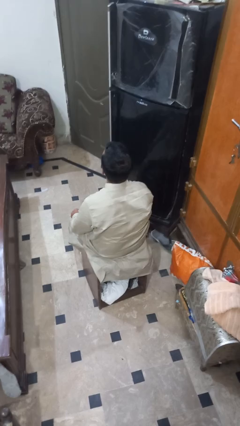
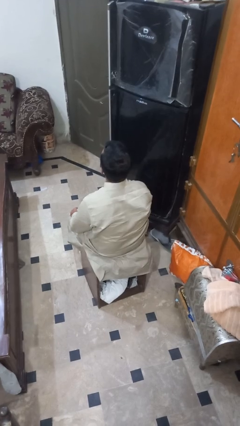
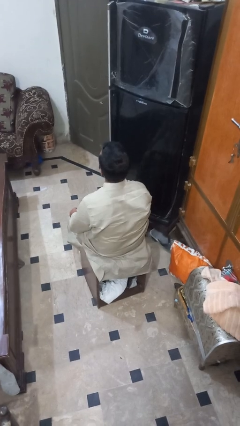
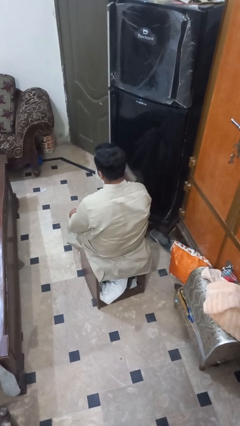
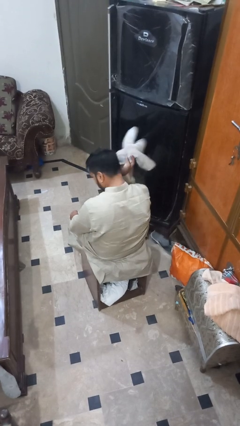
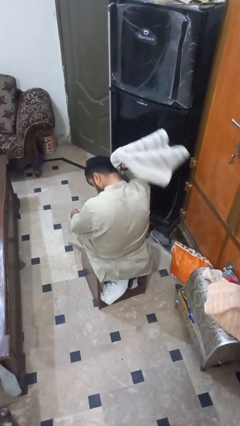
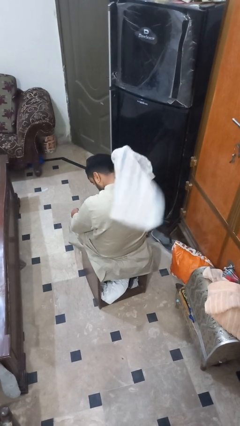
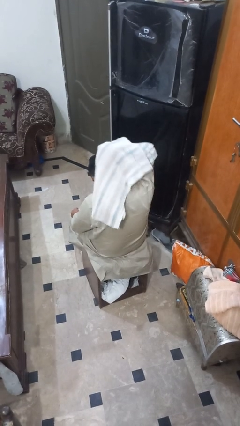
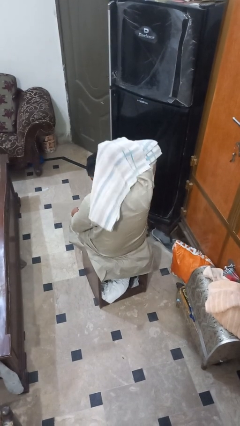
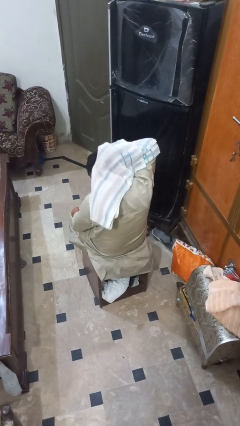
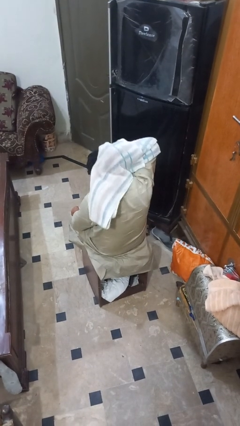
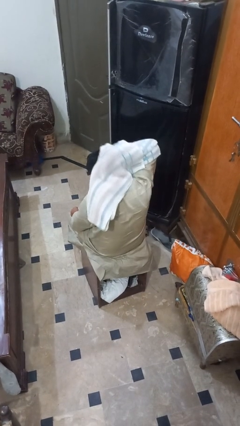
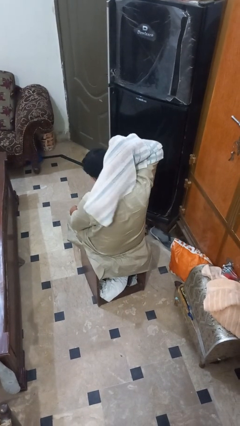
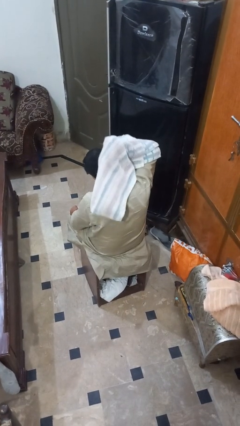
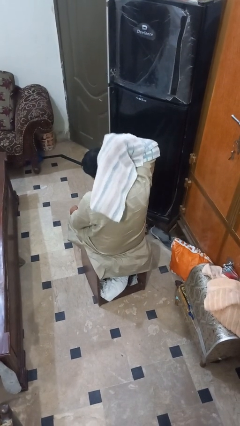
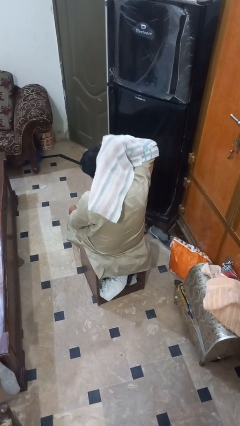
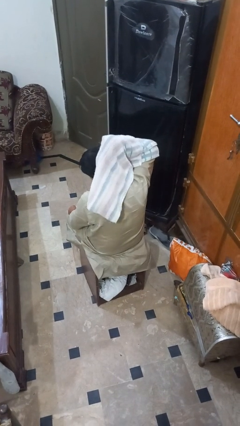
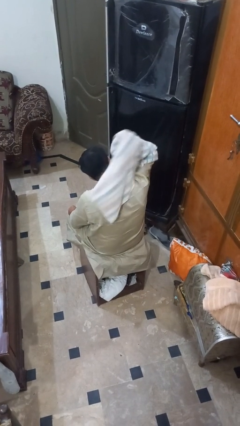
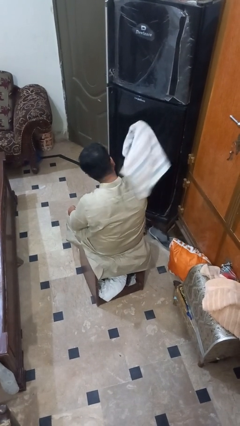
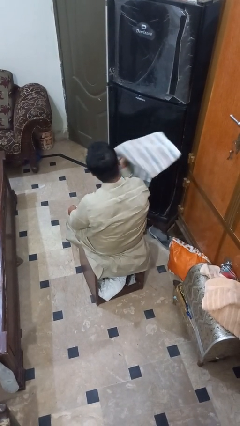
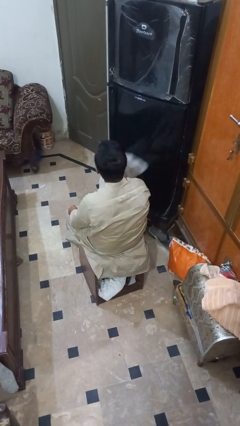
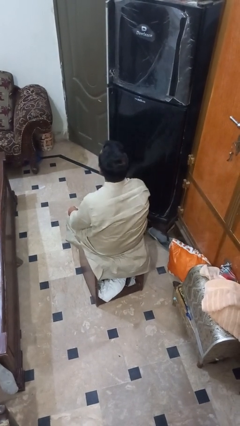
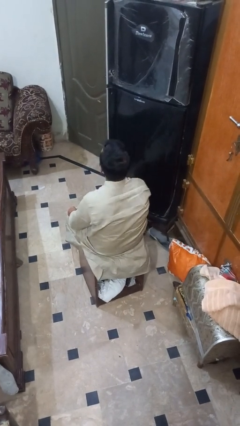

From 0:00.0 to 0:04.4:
person dries hair with towel

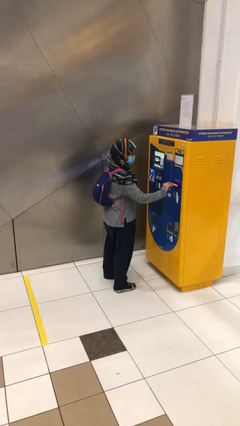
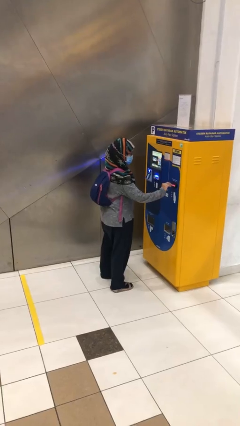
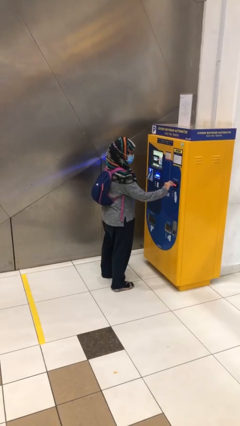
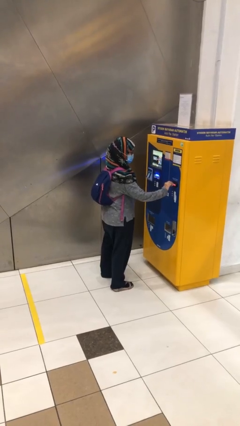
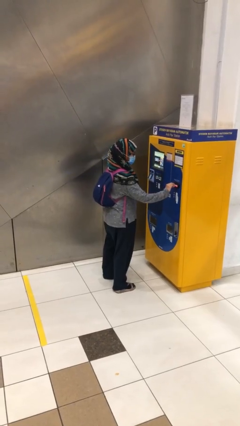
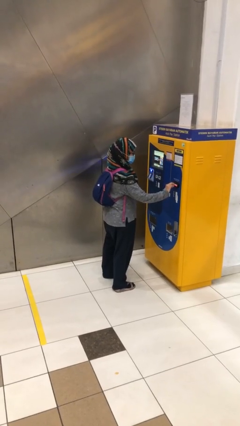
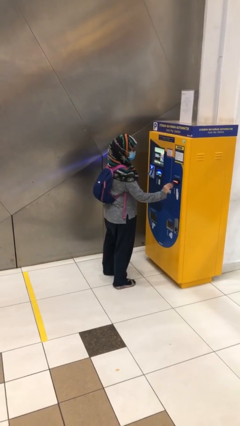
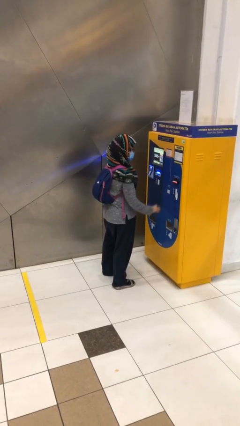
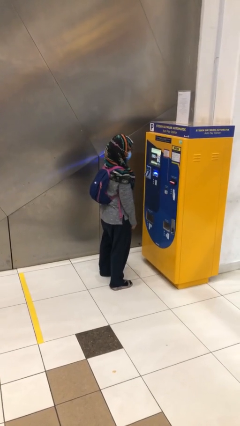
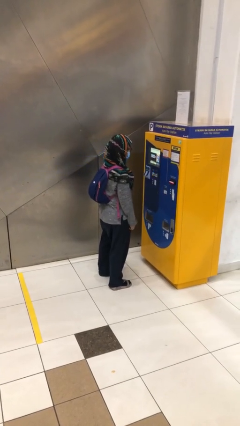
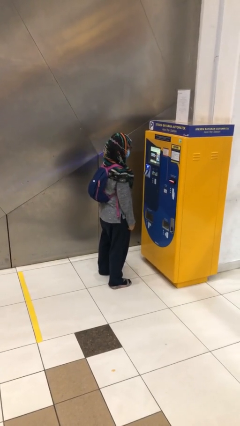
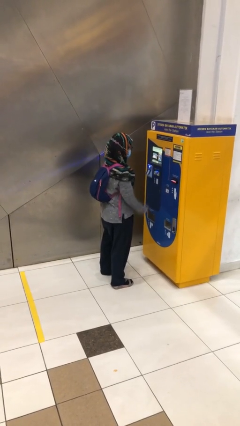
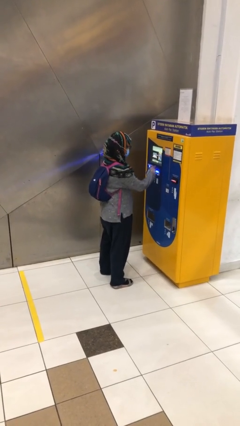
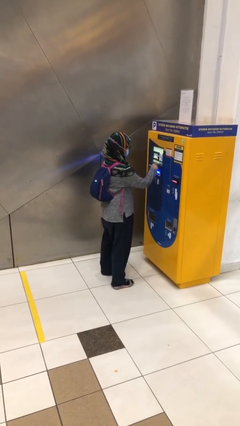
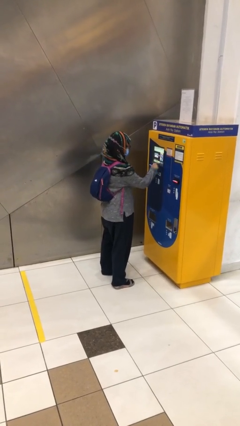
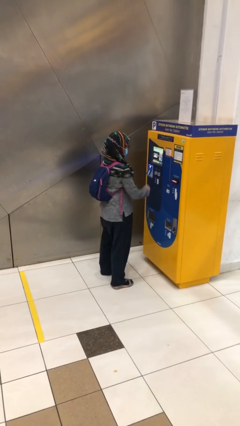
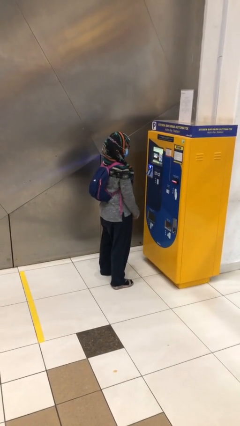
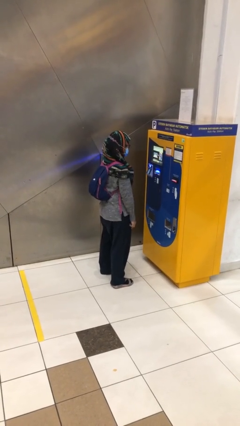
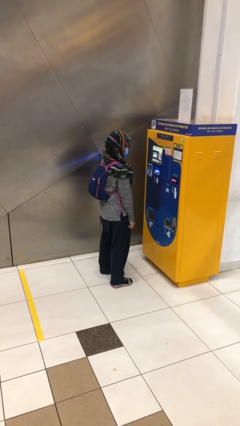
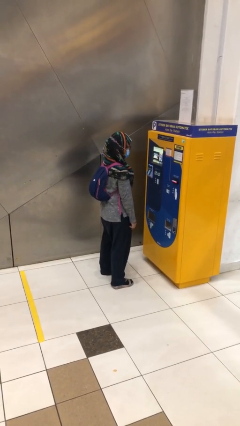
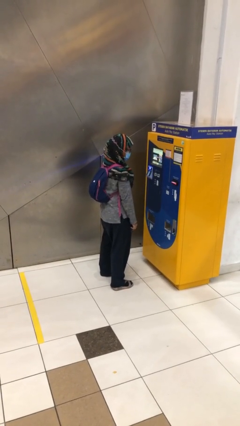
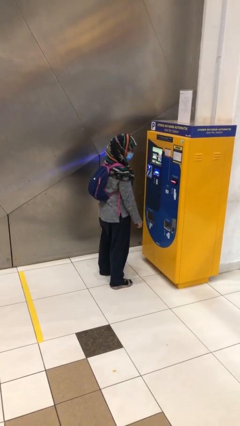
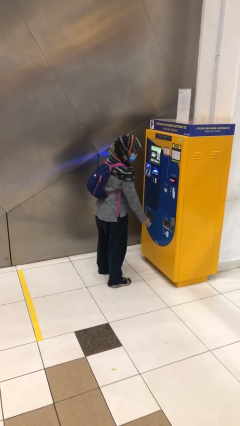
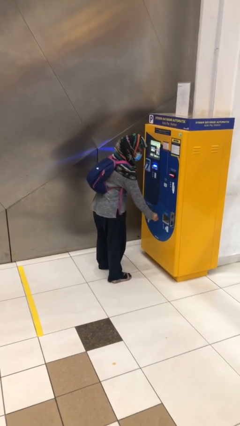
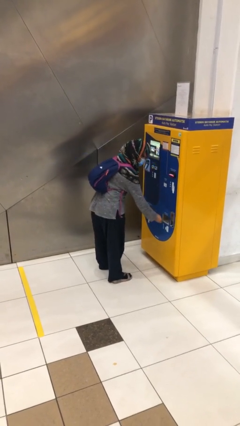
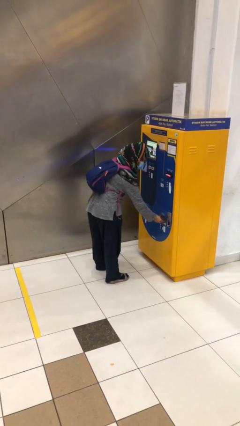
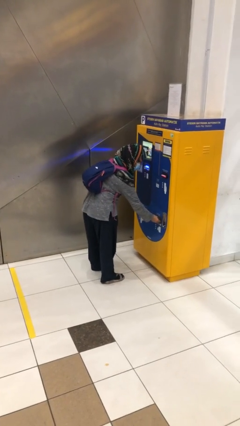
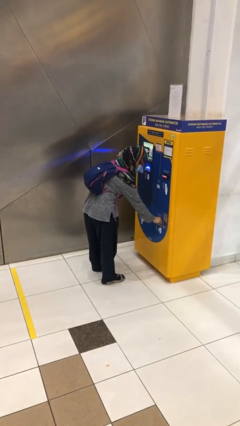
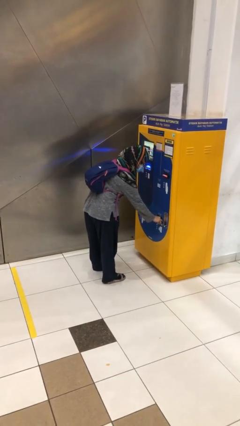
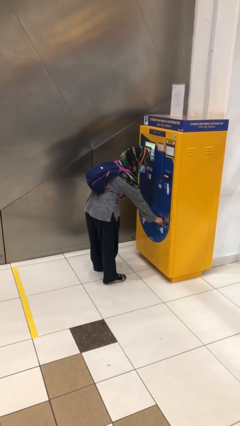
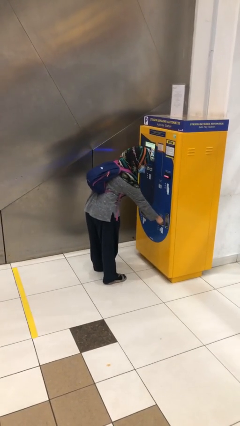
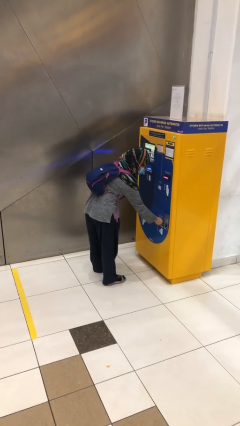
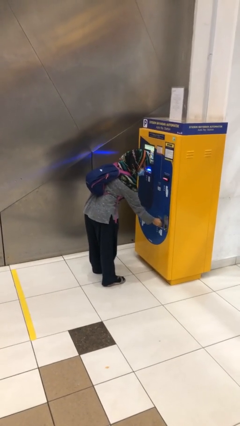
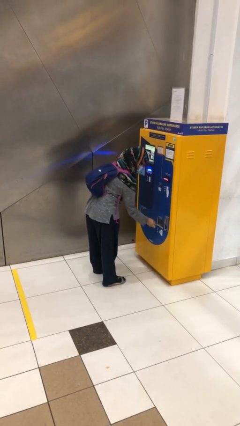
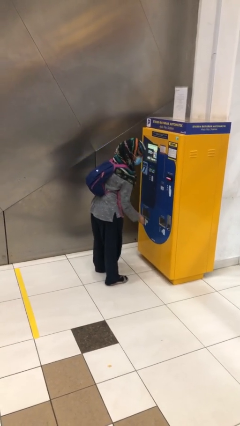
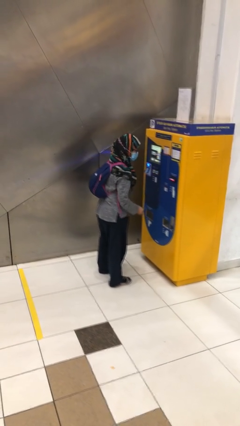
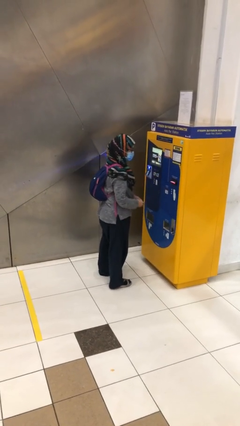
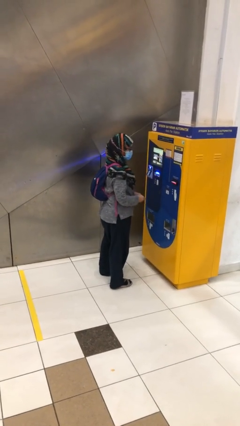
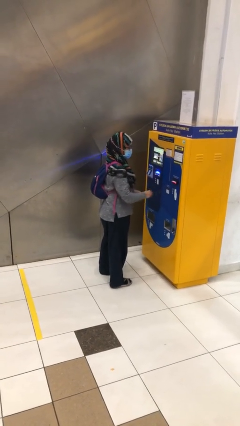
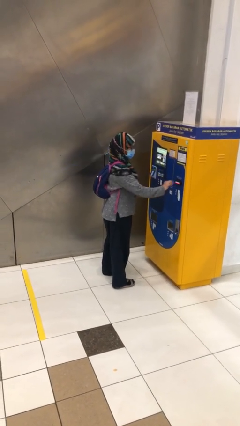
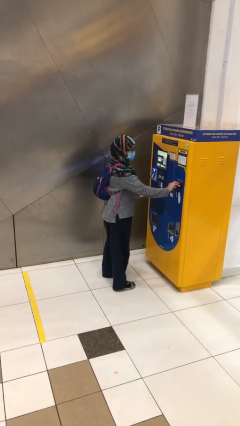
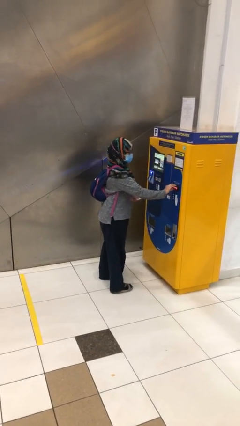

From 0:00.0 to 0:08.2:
person purchases from machine

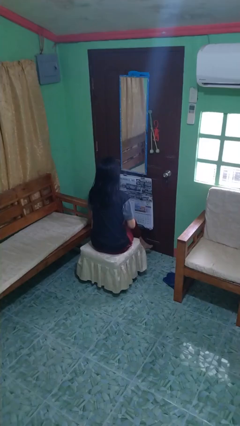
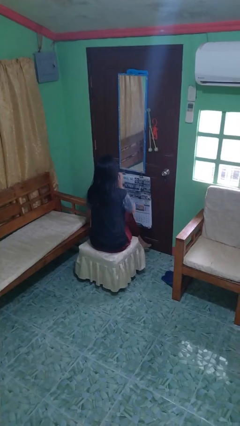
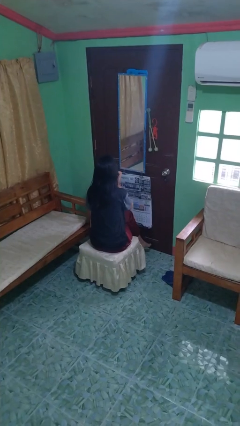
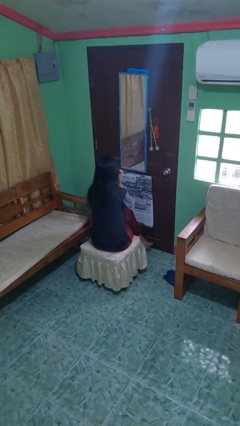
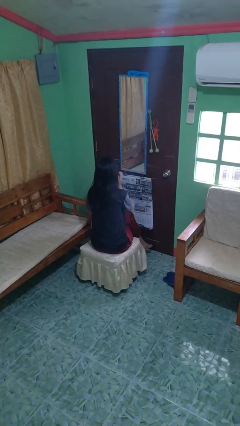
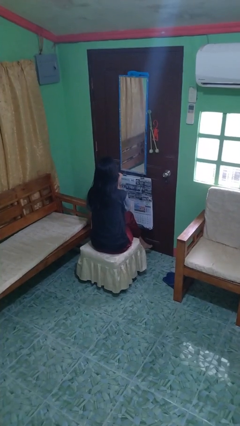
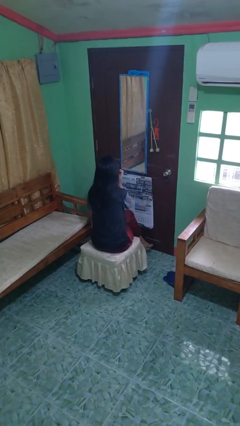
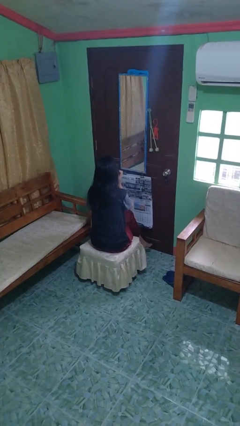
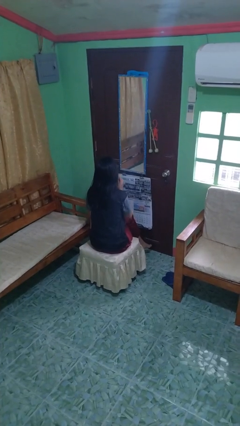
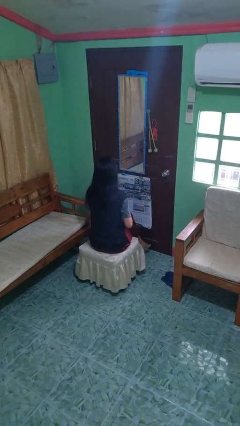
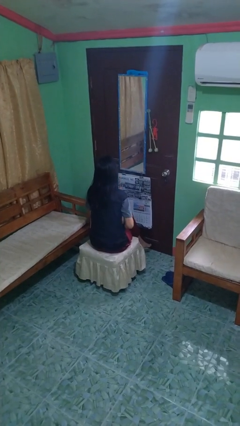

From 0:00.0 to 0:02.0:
person scratches face

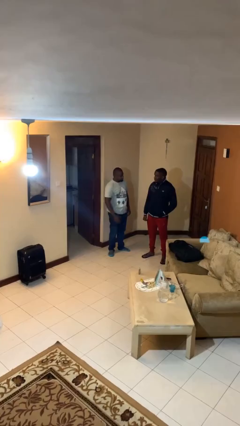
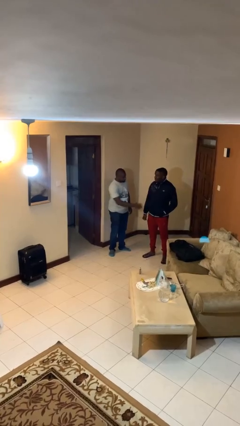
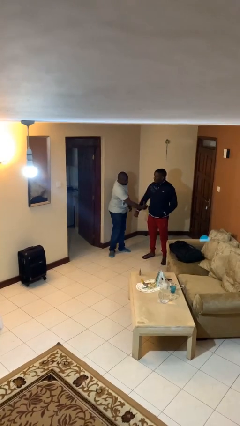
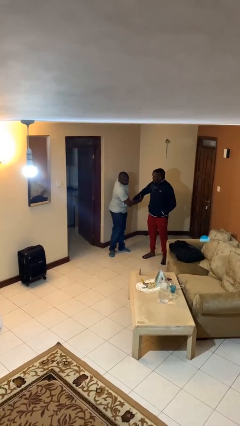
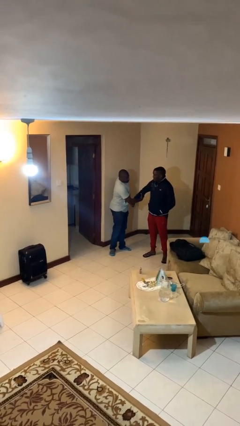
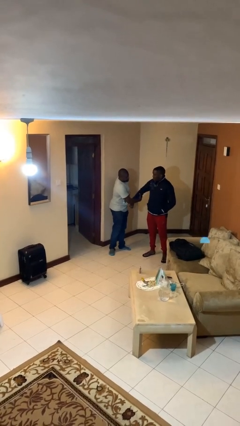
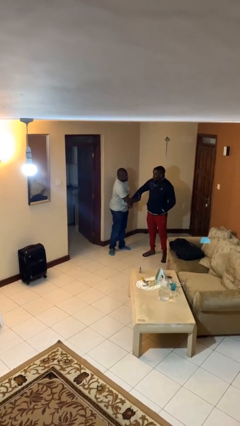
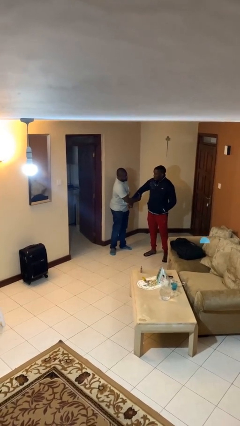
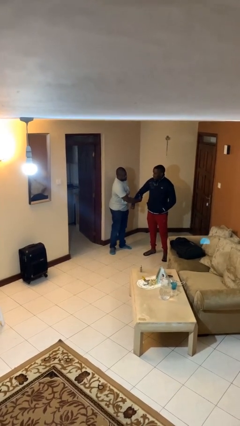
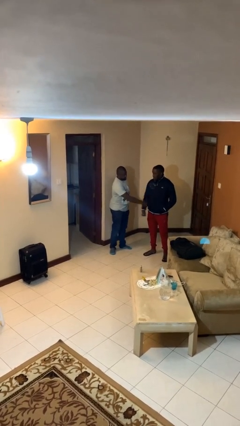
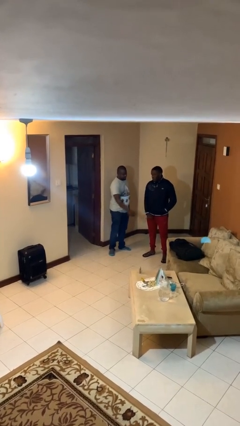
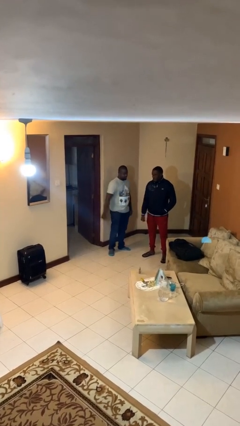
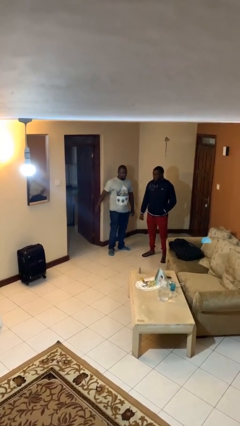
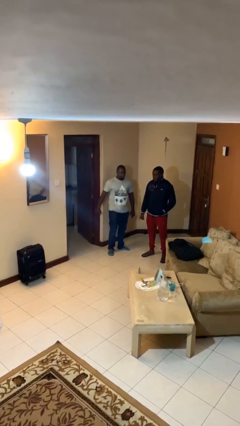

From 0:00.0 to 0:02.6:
person grabs person by forearm

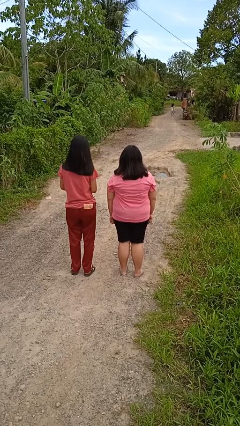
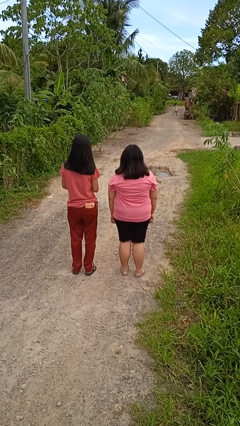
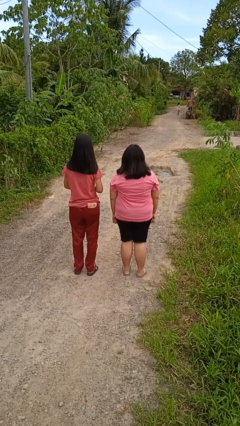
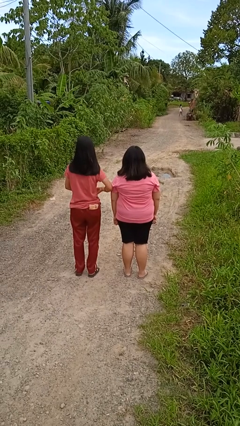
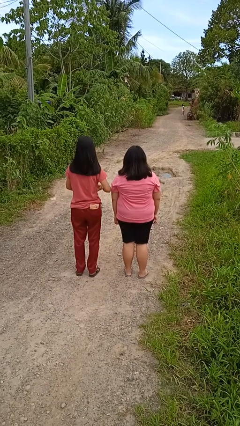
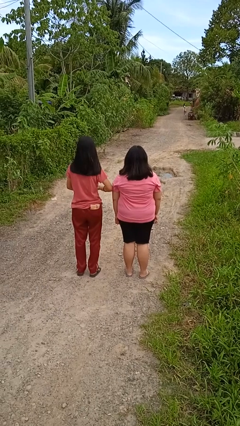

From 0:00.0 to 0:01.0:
person nudges person with elbow
